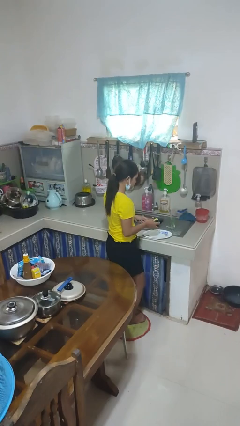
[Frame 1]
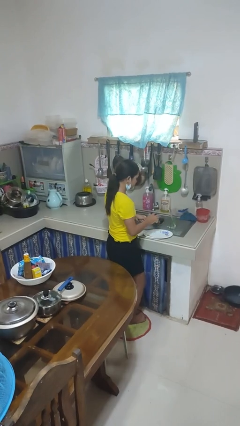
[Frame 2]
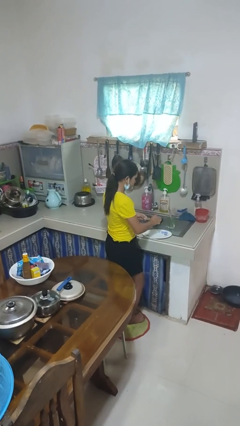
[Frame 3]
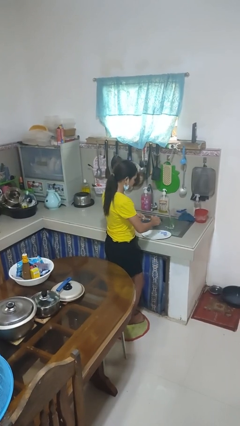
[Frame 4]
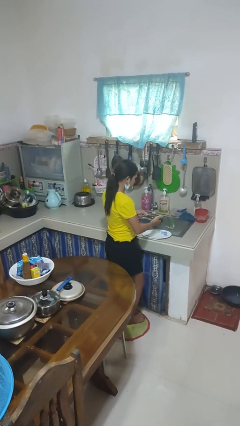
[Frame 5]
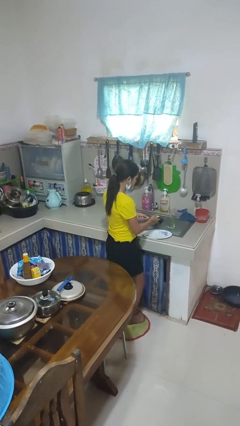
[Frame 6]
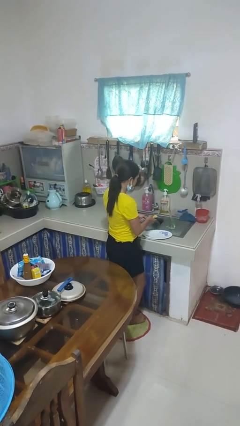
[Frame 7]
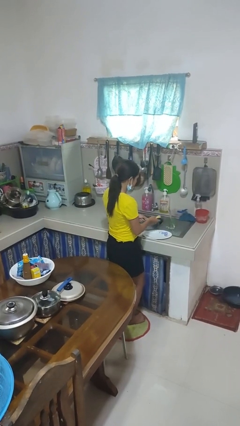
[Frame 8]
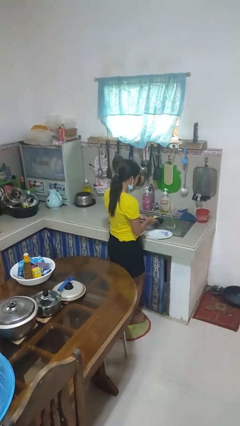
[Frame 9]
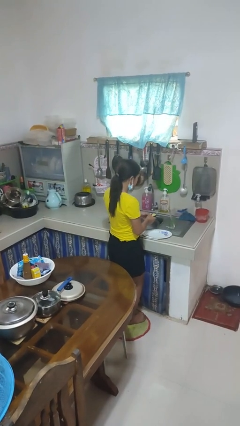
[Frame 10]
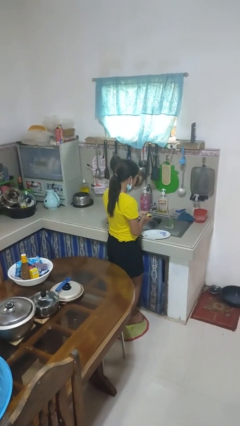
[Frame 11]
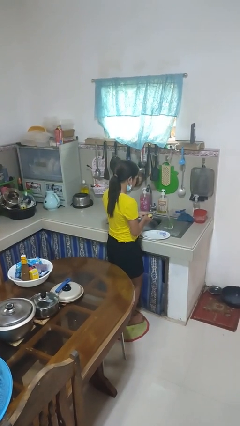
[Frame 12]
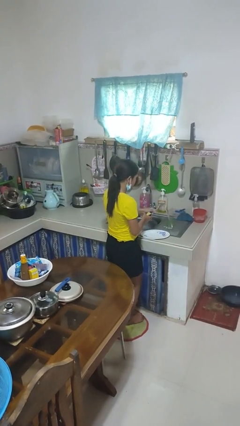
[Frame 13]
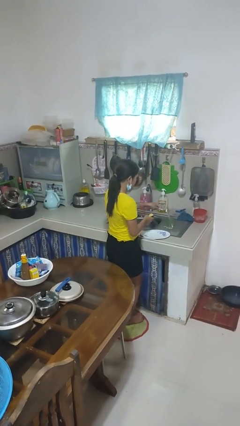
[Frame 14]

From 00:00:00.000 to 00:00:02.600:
person washes dish

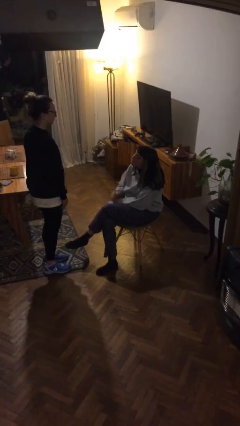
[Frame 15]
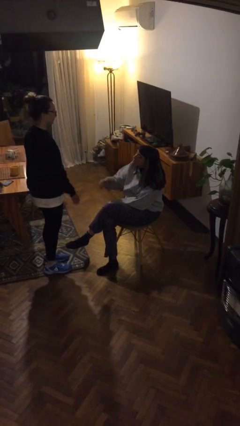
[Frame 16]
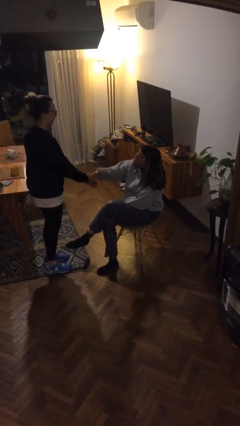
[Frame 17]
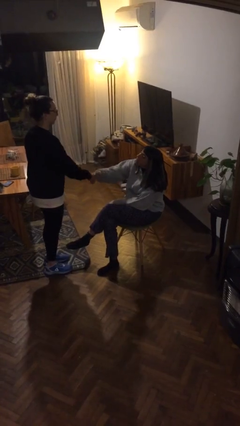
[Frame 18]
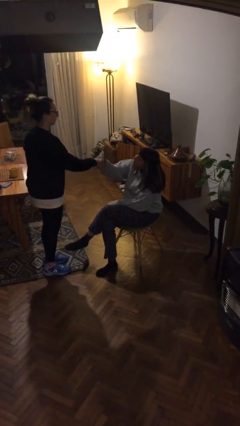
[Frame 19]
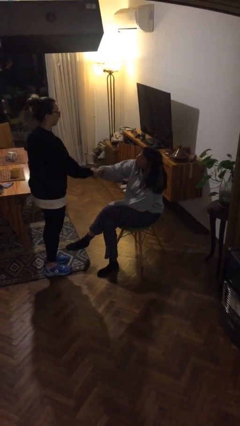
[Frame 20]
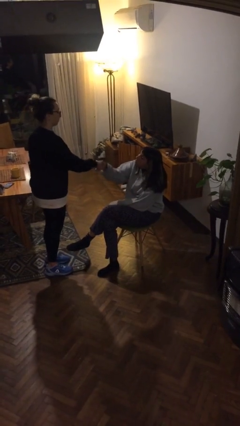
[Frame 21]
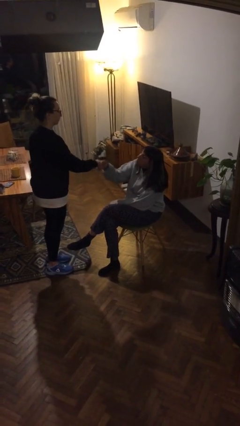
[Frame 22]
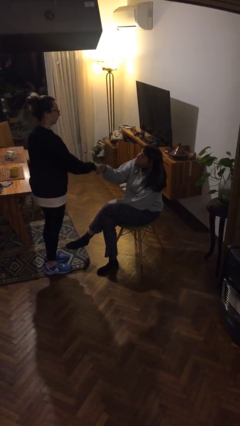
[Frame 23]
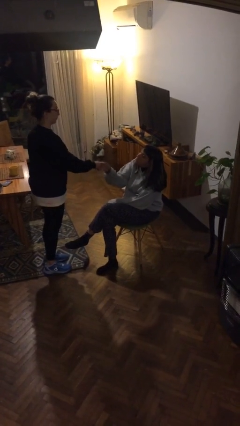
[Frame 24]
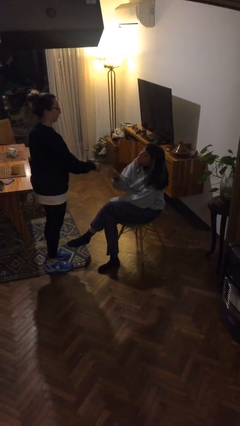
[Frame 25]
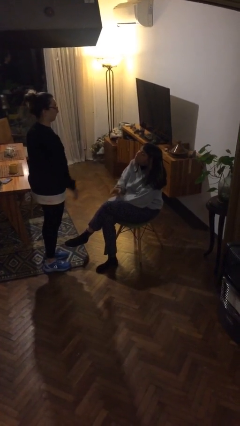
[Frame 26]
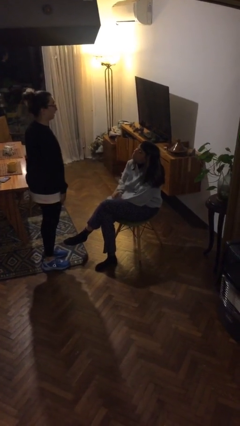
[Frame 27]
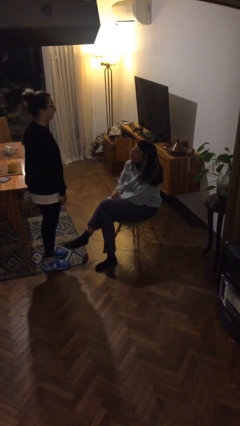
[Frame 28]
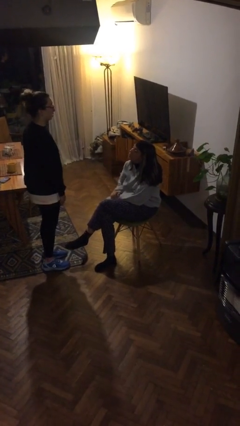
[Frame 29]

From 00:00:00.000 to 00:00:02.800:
person shakes hand

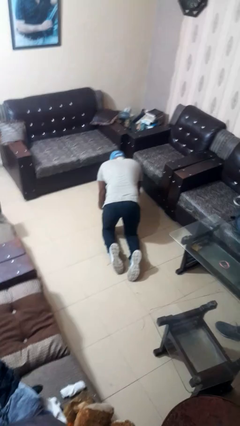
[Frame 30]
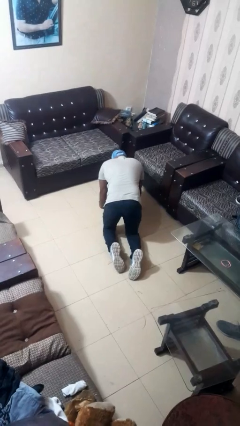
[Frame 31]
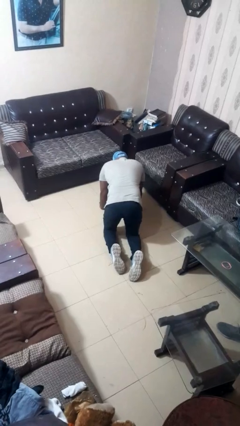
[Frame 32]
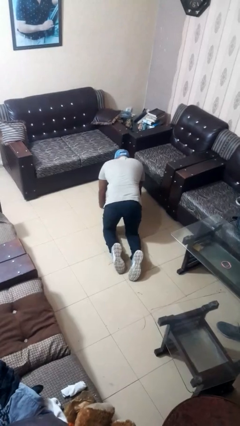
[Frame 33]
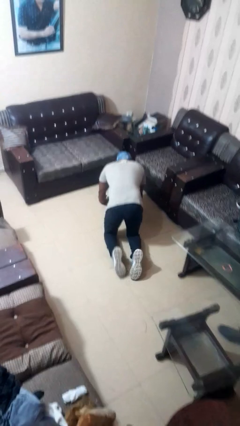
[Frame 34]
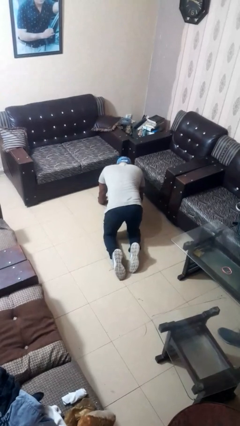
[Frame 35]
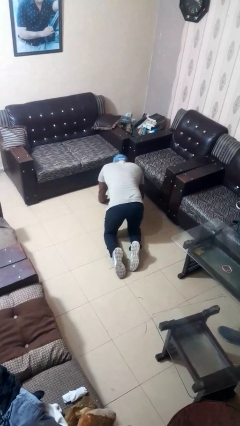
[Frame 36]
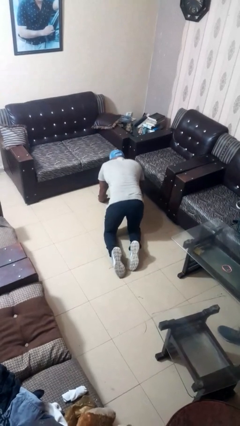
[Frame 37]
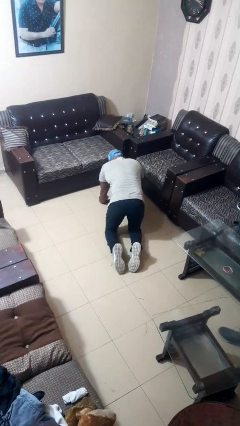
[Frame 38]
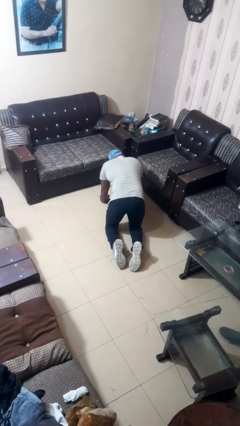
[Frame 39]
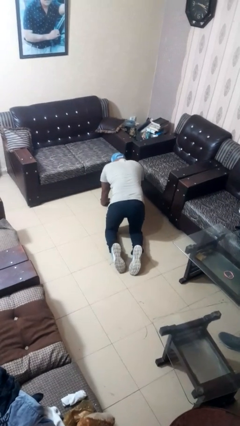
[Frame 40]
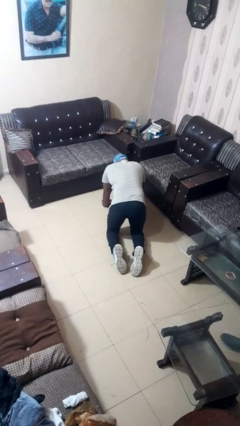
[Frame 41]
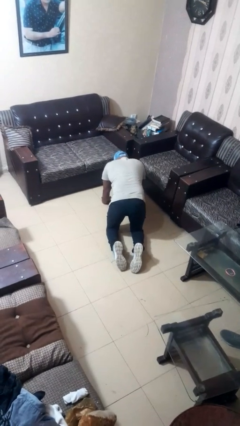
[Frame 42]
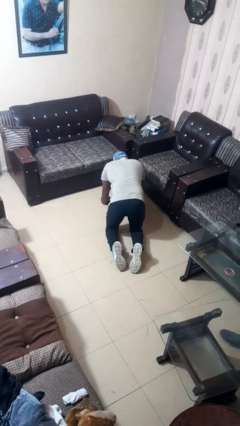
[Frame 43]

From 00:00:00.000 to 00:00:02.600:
person crawls

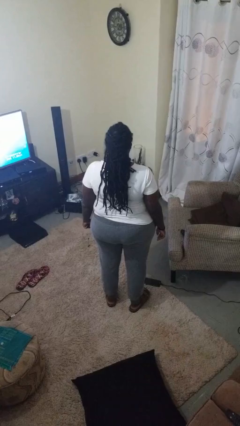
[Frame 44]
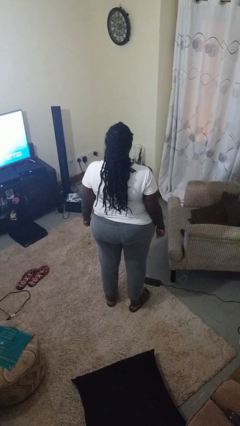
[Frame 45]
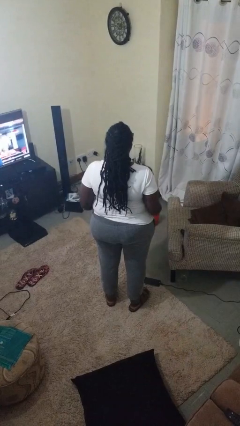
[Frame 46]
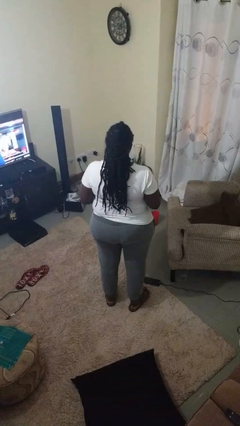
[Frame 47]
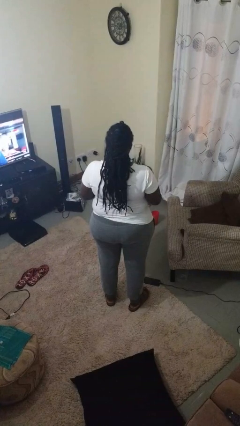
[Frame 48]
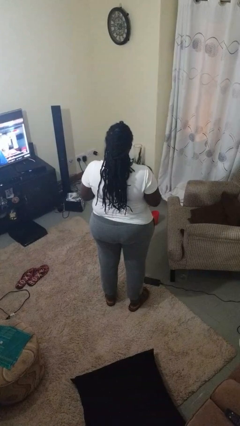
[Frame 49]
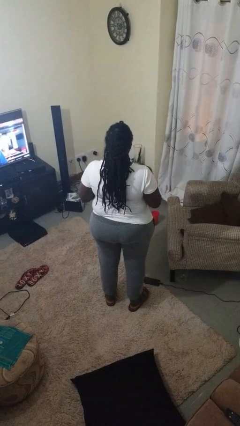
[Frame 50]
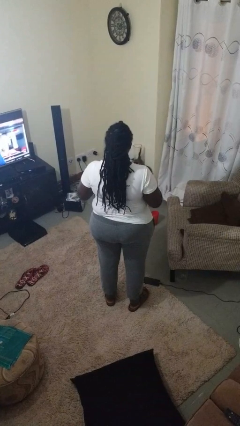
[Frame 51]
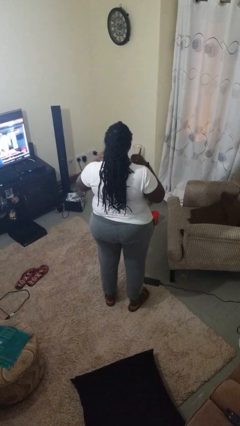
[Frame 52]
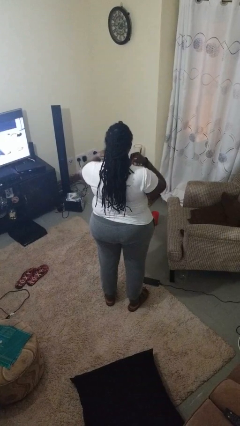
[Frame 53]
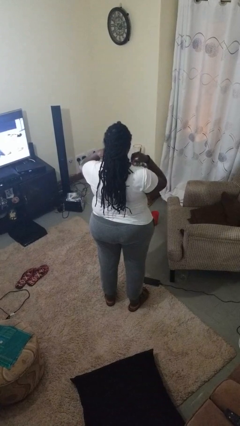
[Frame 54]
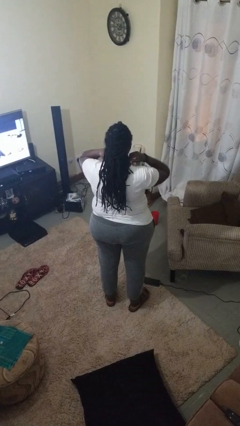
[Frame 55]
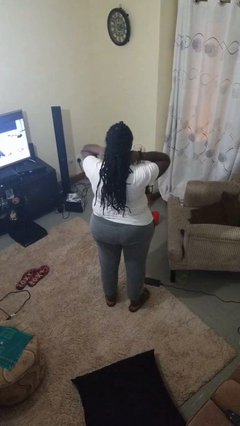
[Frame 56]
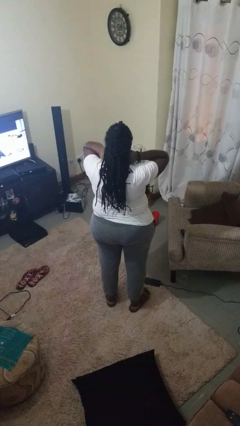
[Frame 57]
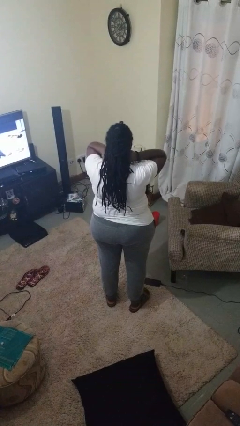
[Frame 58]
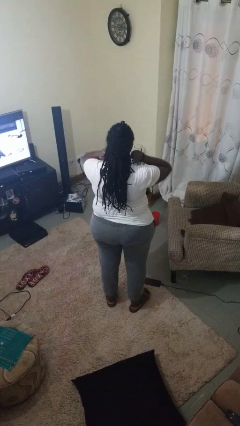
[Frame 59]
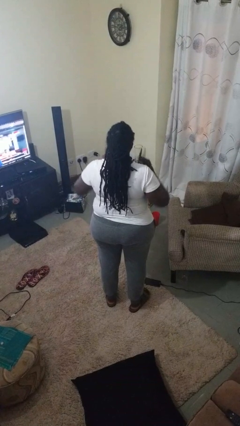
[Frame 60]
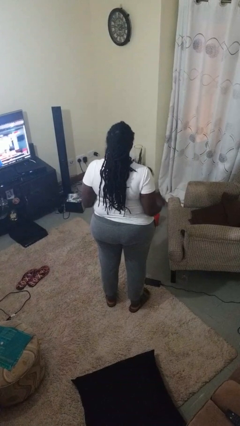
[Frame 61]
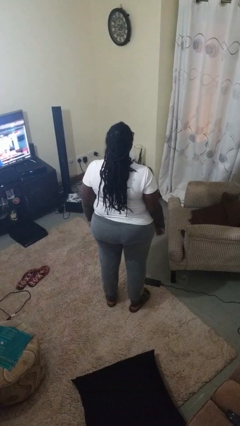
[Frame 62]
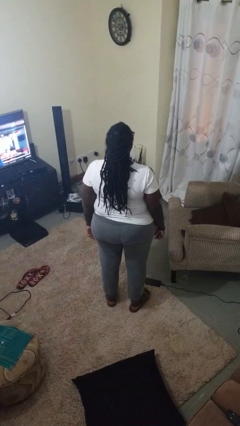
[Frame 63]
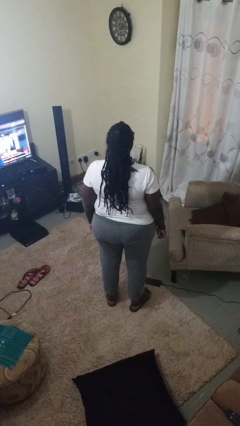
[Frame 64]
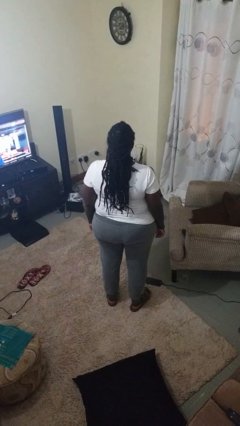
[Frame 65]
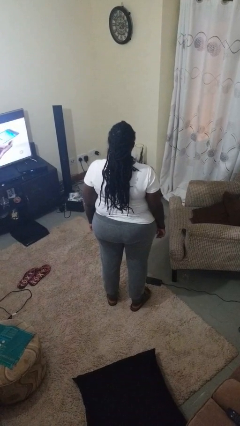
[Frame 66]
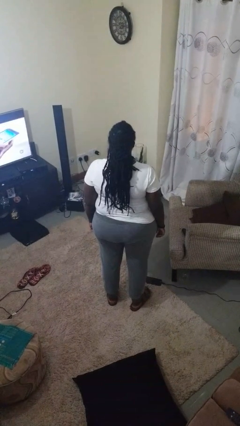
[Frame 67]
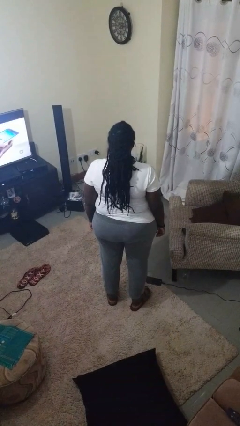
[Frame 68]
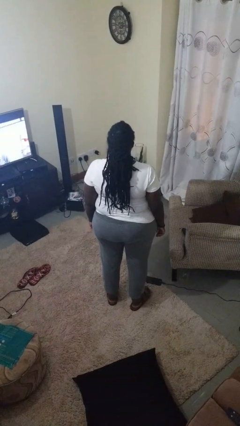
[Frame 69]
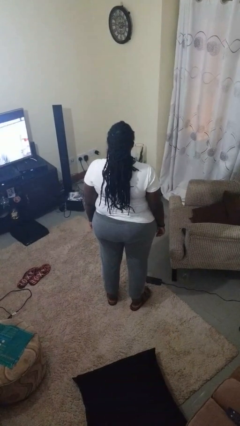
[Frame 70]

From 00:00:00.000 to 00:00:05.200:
person puts on necklace

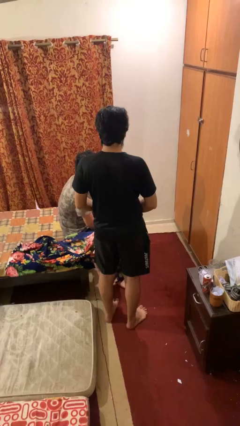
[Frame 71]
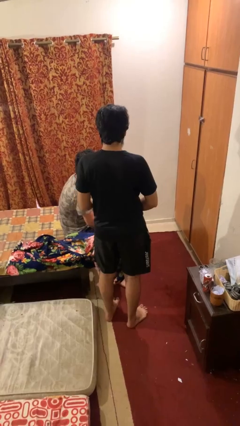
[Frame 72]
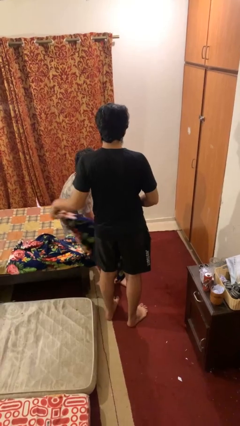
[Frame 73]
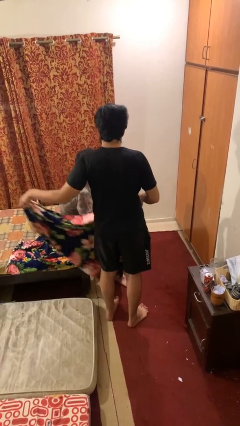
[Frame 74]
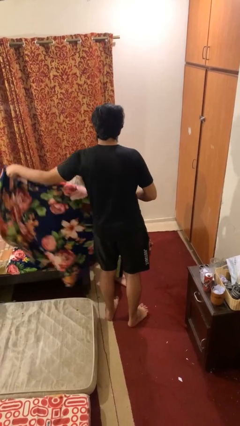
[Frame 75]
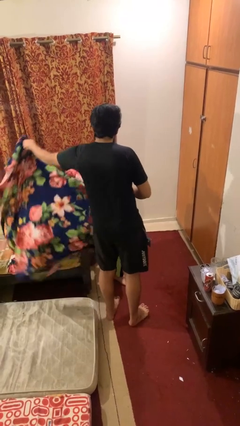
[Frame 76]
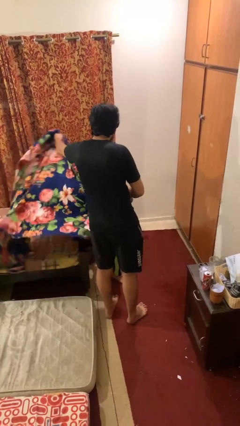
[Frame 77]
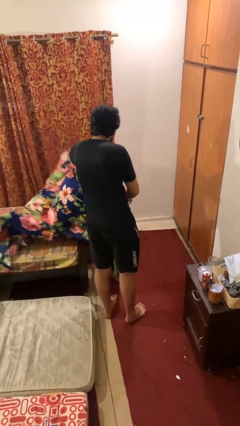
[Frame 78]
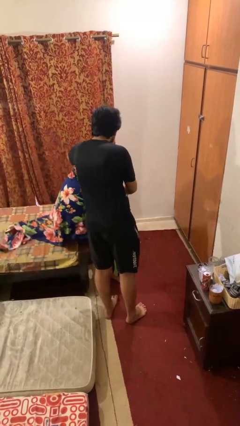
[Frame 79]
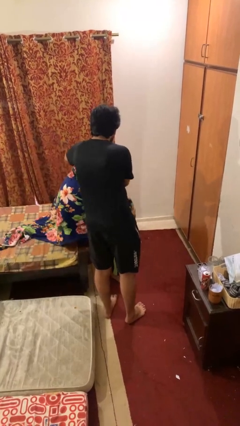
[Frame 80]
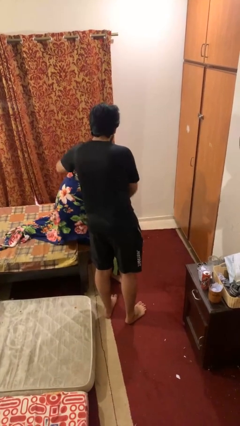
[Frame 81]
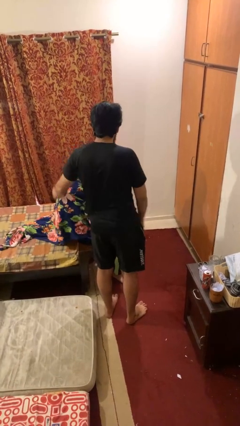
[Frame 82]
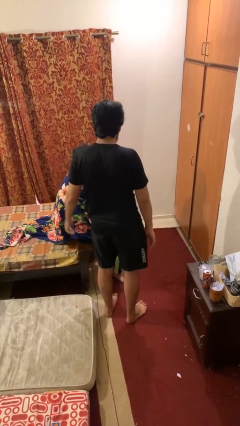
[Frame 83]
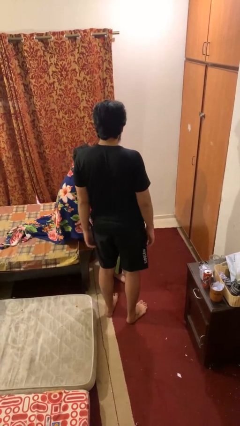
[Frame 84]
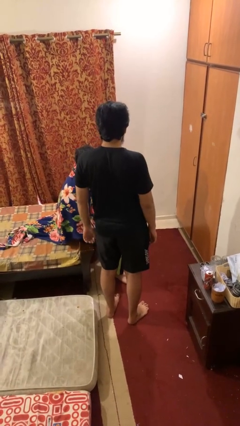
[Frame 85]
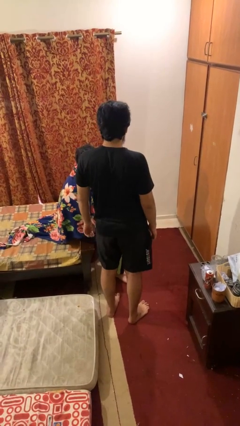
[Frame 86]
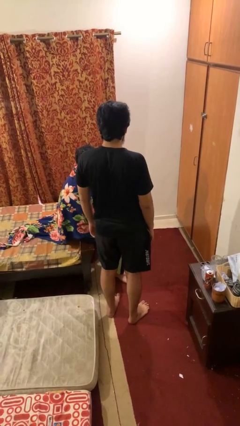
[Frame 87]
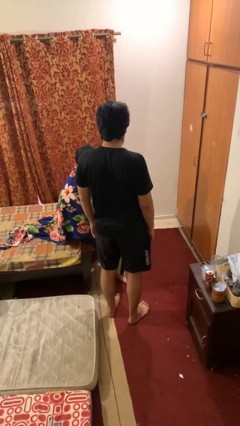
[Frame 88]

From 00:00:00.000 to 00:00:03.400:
person covers friend with blanket

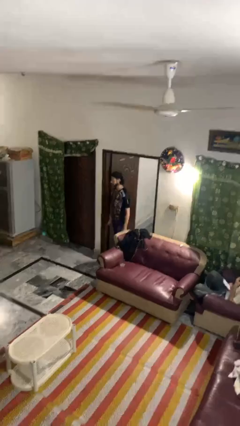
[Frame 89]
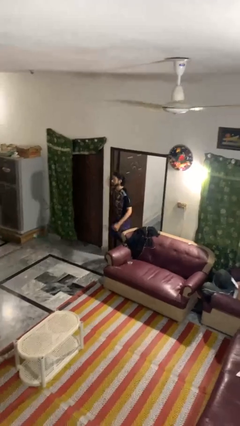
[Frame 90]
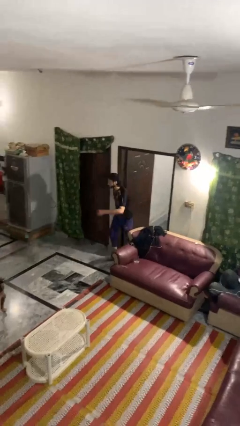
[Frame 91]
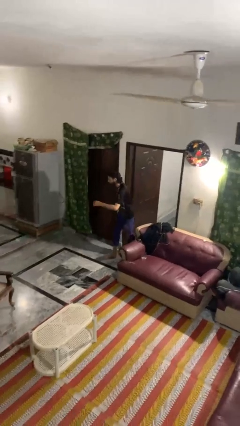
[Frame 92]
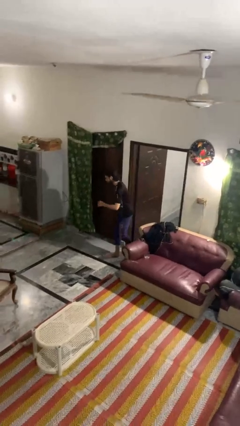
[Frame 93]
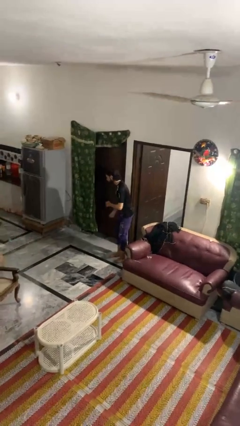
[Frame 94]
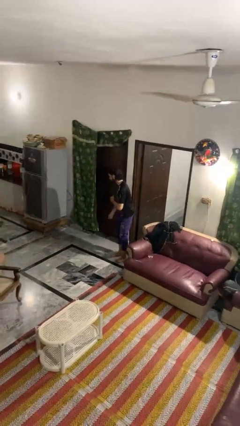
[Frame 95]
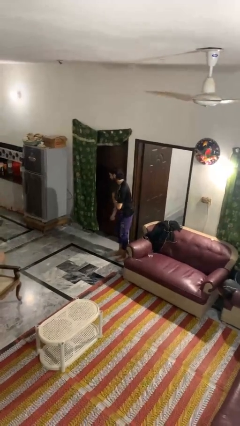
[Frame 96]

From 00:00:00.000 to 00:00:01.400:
person bumps into wall
